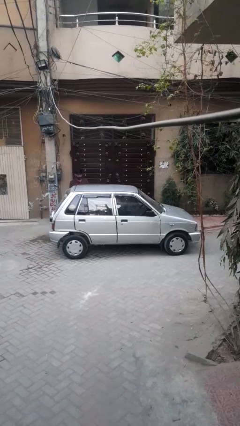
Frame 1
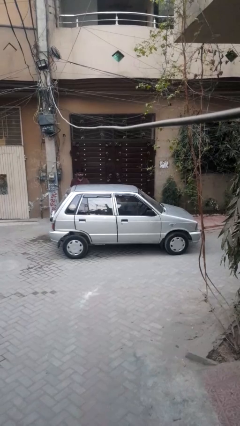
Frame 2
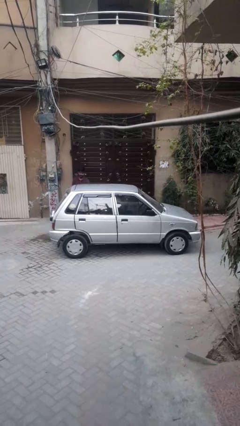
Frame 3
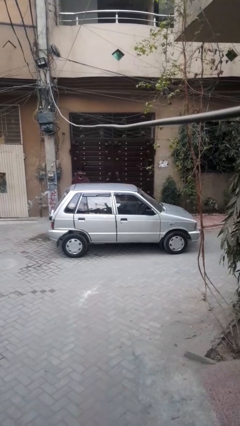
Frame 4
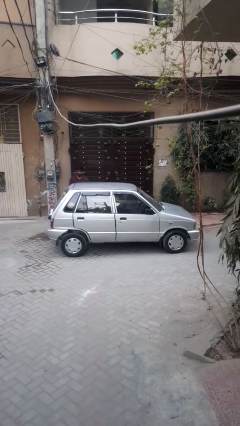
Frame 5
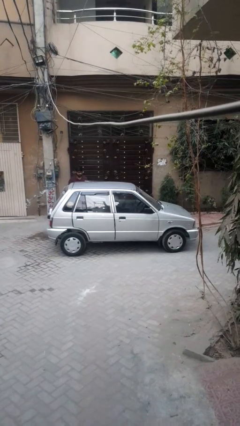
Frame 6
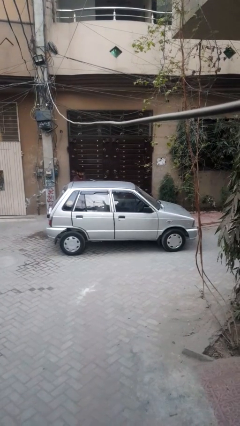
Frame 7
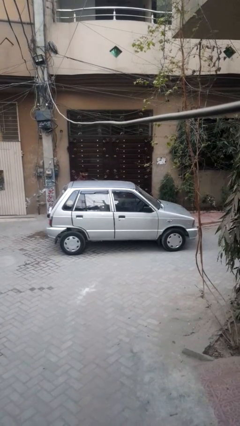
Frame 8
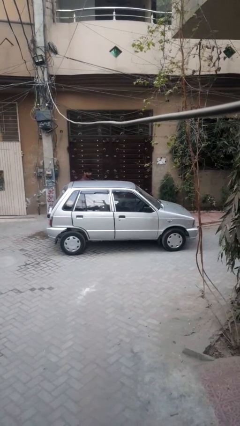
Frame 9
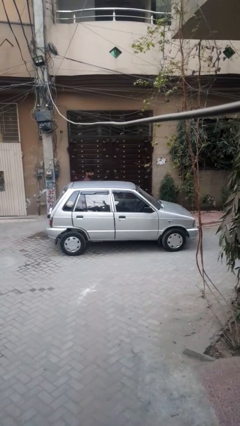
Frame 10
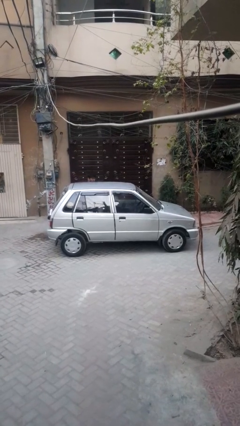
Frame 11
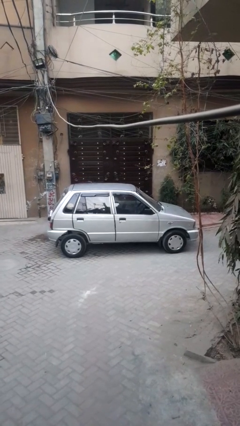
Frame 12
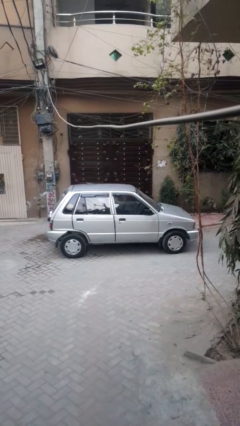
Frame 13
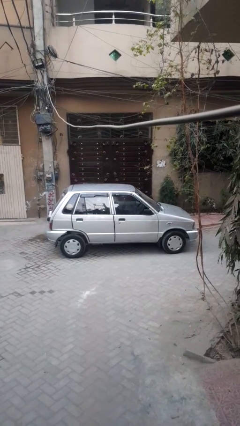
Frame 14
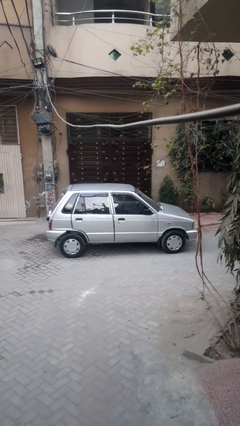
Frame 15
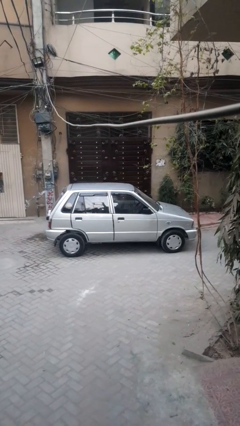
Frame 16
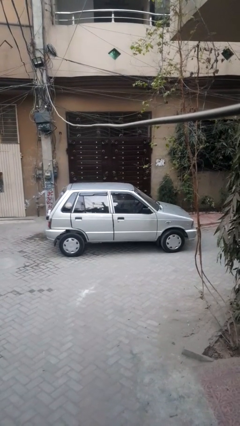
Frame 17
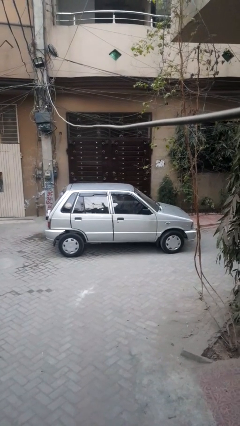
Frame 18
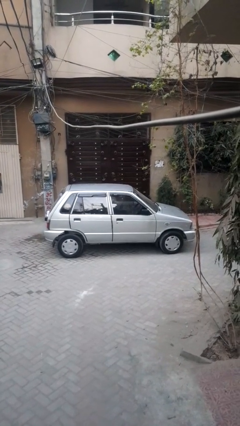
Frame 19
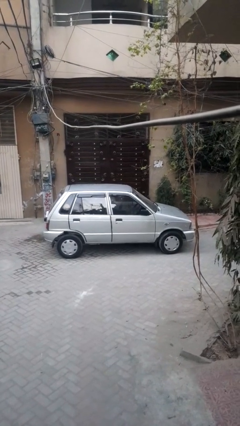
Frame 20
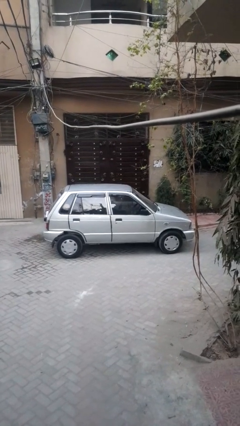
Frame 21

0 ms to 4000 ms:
car picks up person

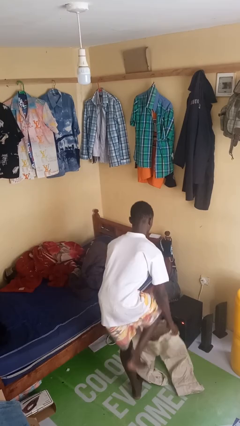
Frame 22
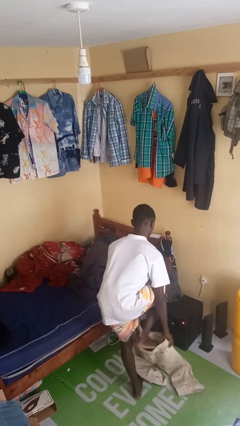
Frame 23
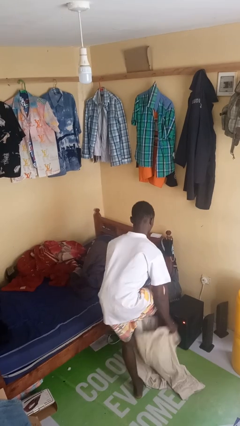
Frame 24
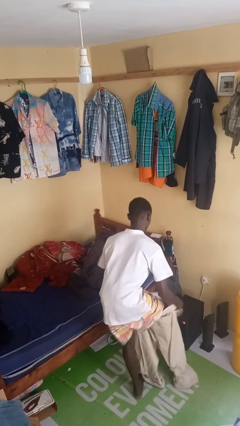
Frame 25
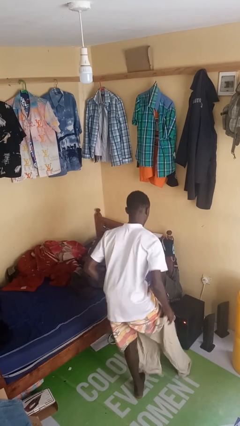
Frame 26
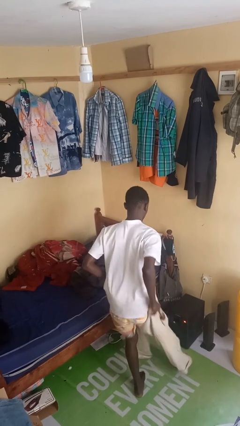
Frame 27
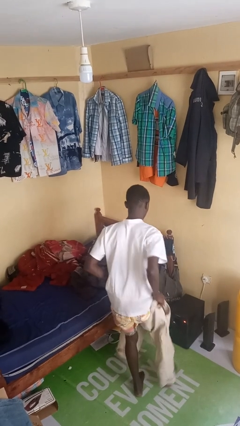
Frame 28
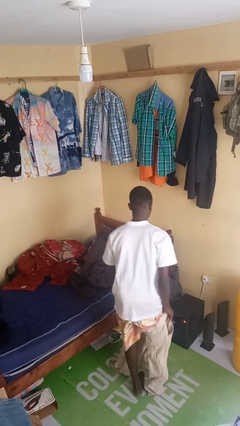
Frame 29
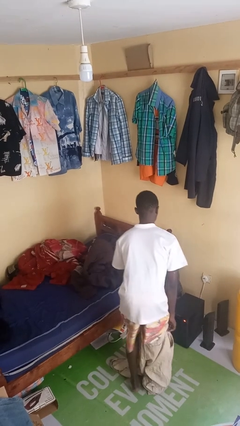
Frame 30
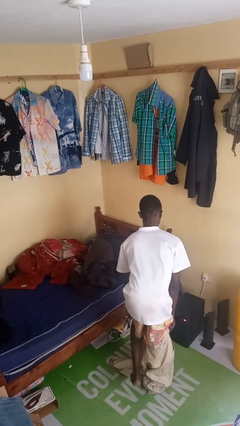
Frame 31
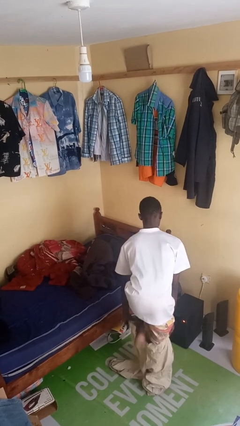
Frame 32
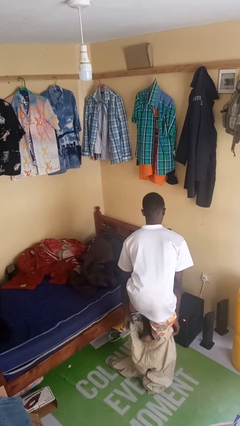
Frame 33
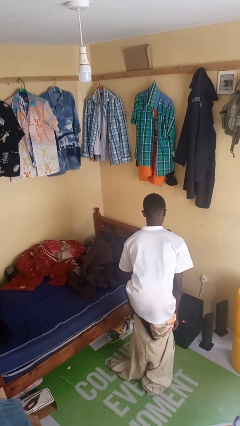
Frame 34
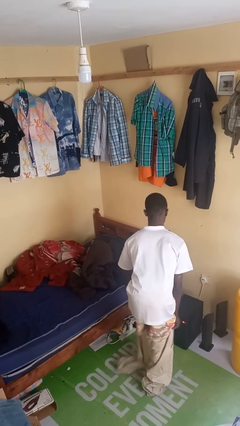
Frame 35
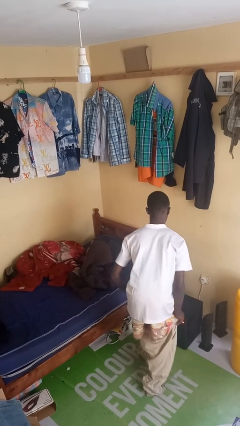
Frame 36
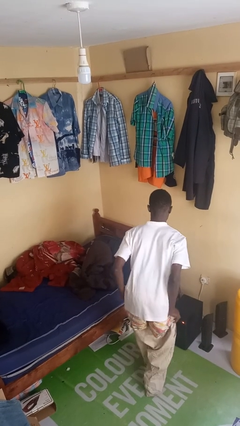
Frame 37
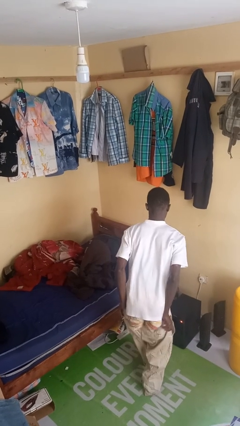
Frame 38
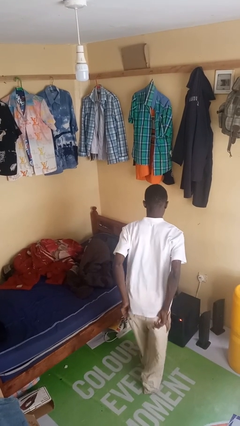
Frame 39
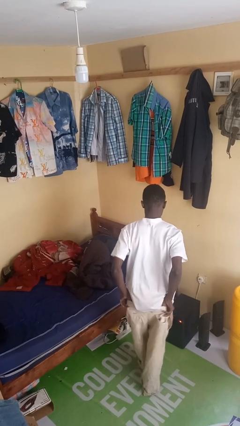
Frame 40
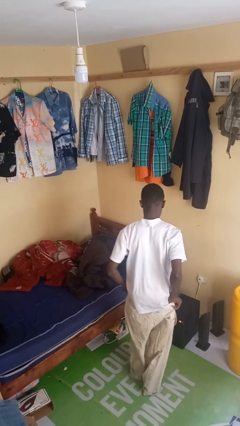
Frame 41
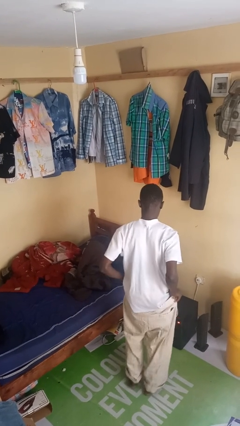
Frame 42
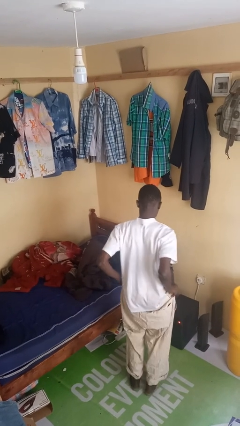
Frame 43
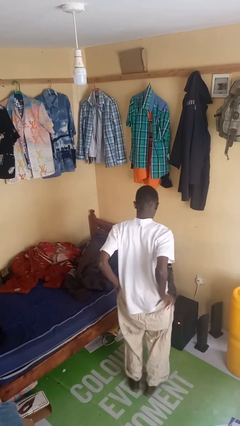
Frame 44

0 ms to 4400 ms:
person puts on pants

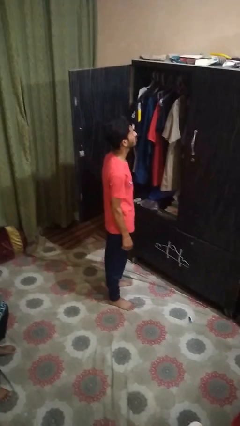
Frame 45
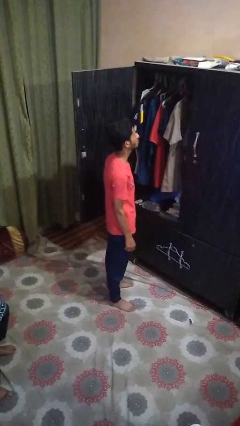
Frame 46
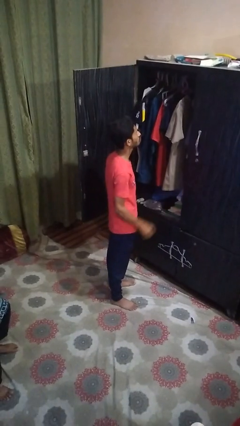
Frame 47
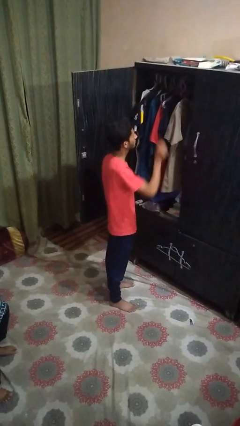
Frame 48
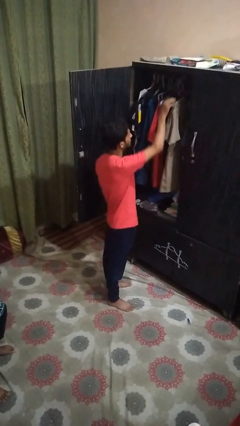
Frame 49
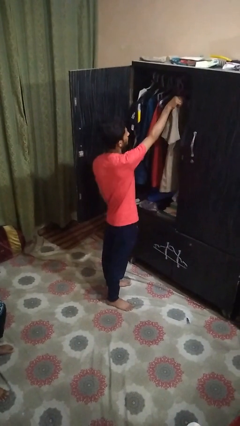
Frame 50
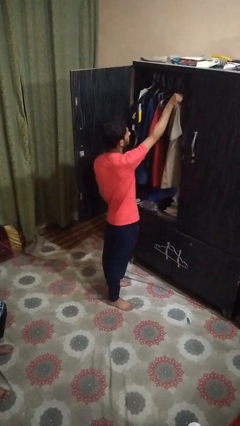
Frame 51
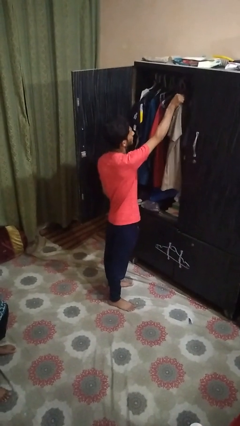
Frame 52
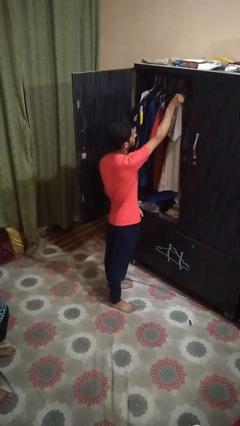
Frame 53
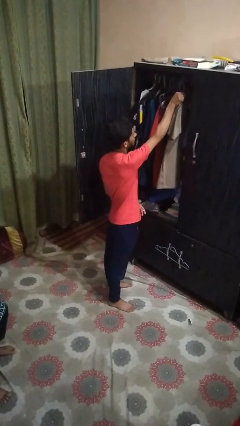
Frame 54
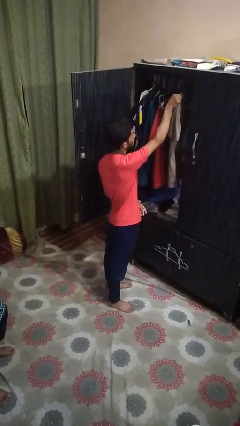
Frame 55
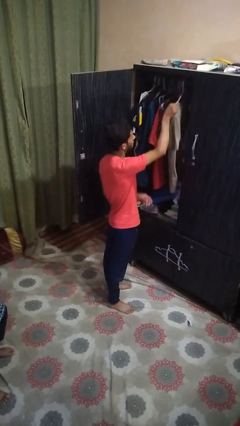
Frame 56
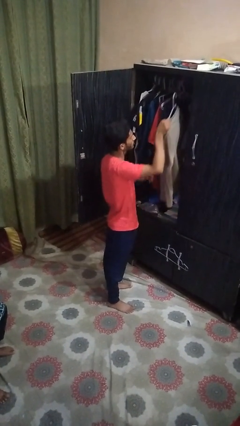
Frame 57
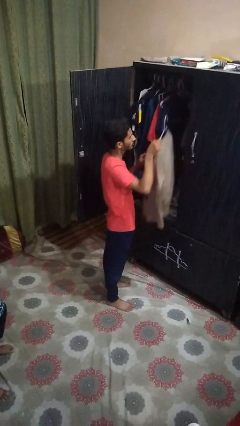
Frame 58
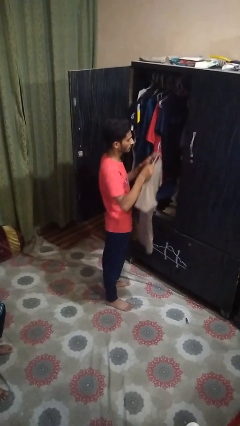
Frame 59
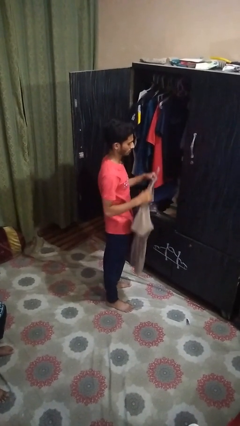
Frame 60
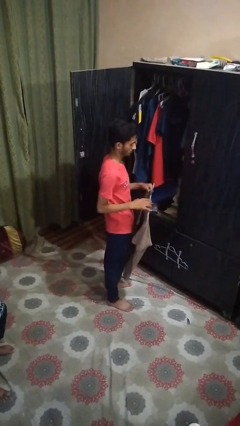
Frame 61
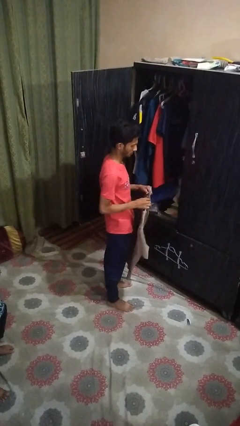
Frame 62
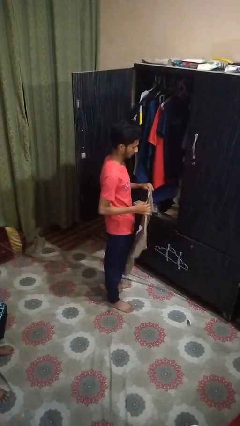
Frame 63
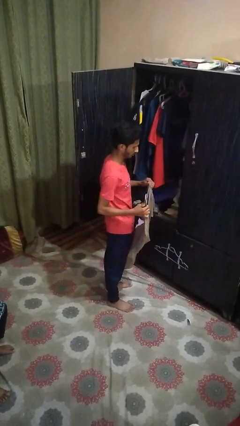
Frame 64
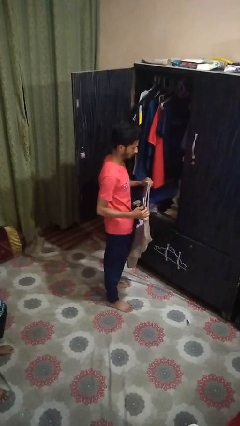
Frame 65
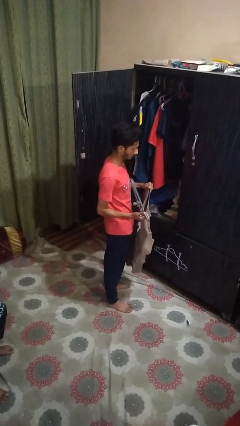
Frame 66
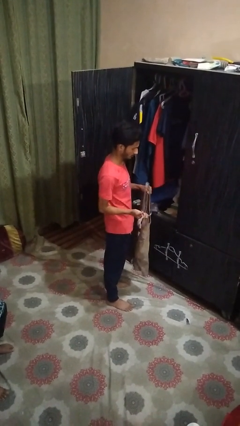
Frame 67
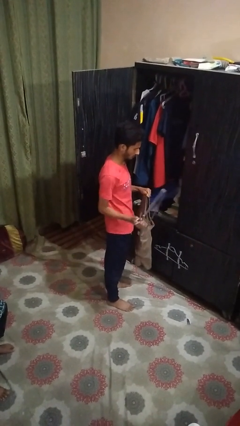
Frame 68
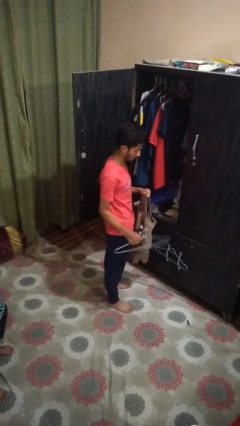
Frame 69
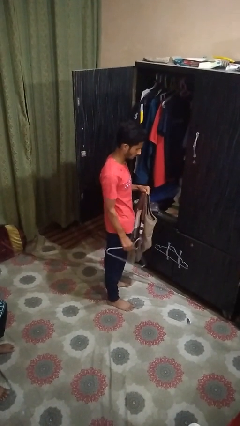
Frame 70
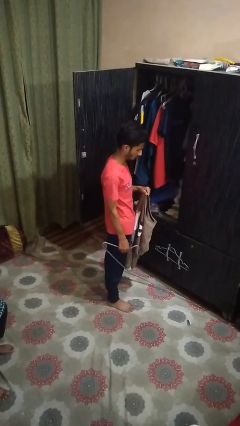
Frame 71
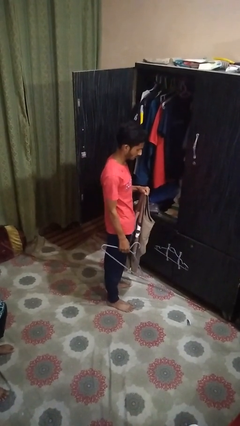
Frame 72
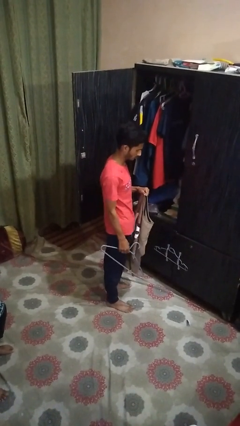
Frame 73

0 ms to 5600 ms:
person takes clothes from closet

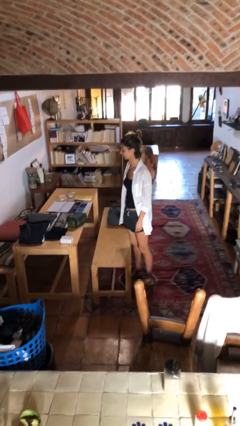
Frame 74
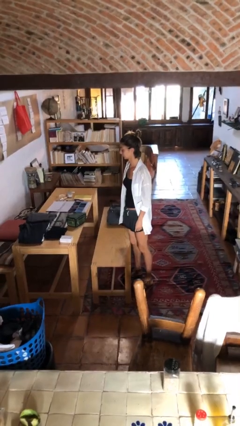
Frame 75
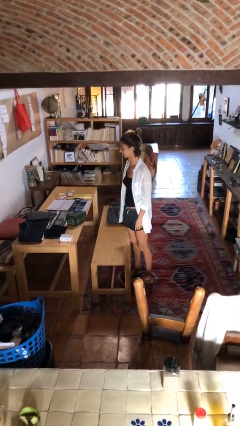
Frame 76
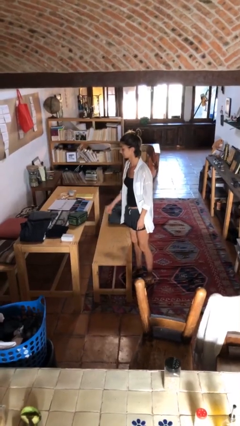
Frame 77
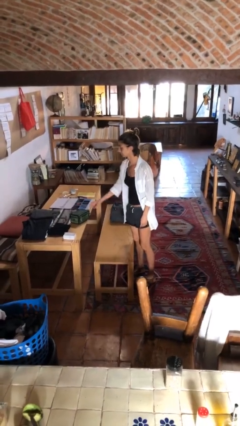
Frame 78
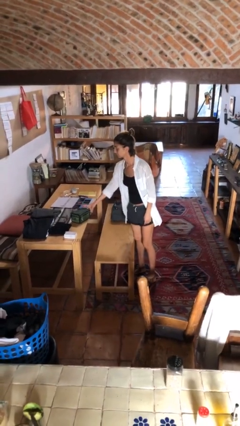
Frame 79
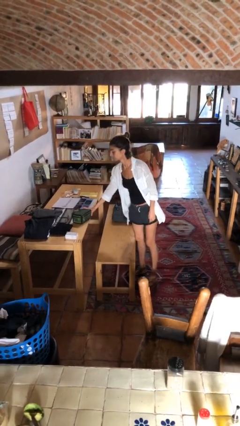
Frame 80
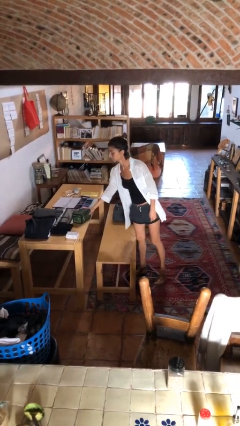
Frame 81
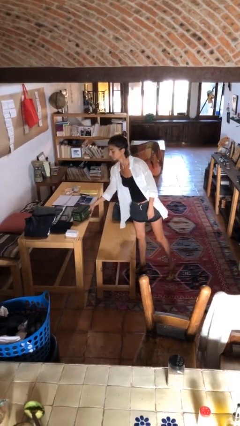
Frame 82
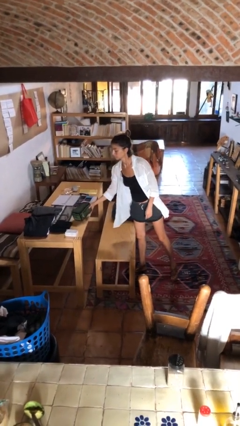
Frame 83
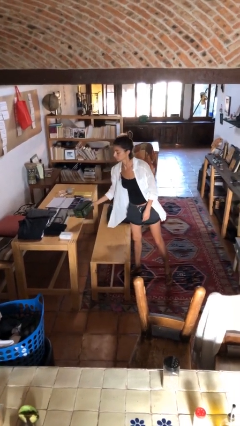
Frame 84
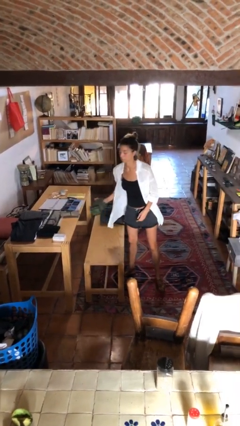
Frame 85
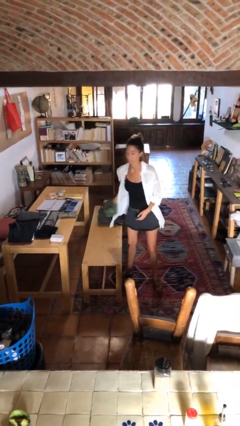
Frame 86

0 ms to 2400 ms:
person picks up object from table

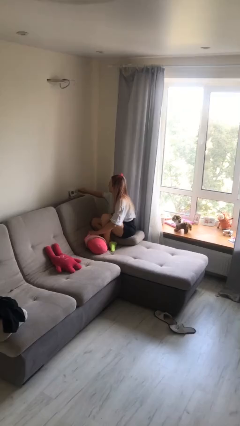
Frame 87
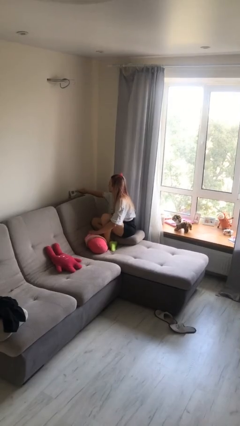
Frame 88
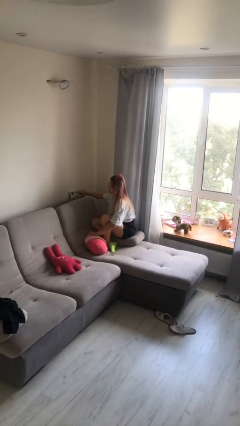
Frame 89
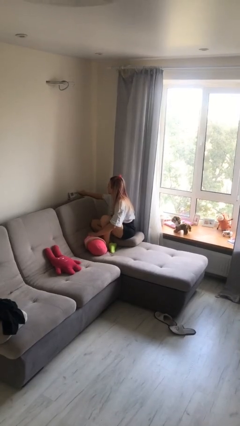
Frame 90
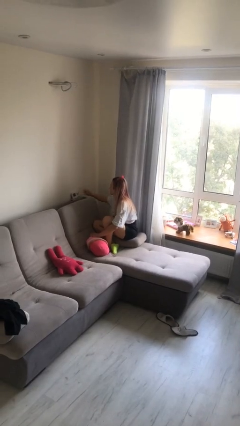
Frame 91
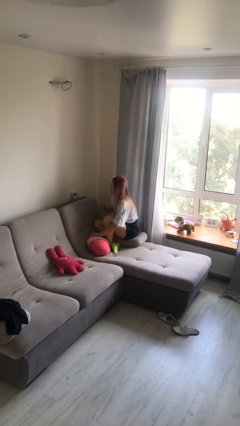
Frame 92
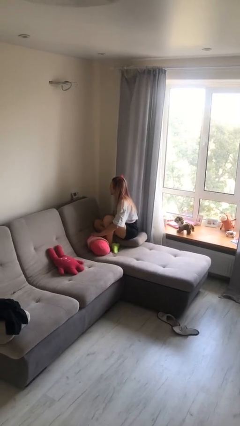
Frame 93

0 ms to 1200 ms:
person adjusts thermostat

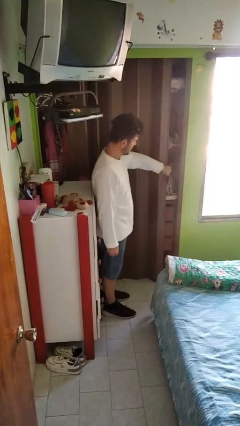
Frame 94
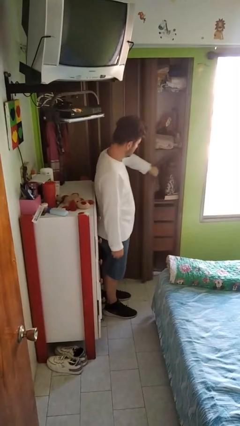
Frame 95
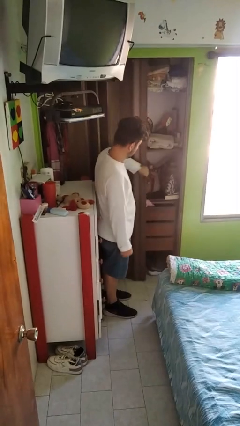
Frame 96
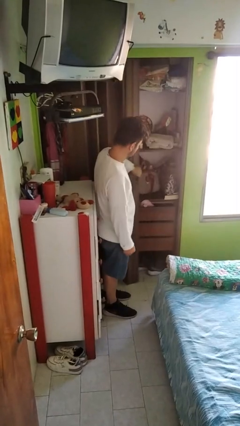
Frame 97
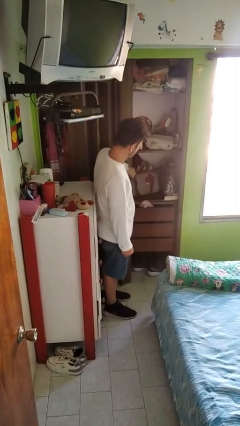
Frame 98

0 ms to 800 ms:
person opens sliding door
